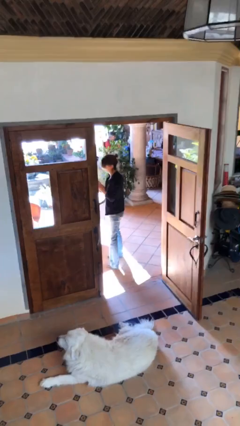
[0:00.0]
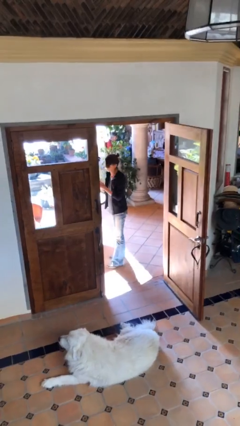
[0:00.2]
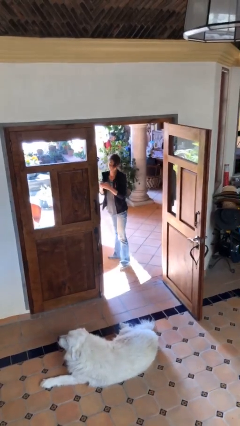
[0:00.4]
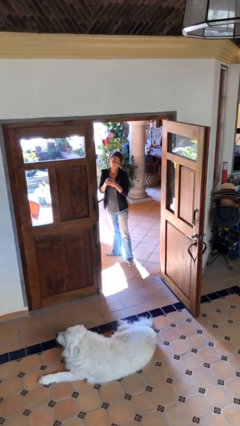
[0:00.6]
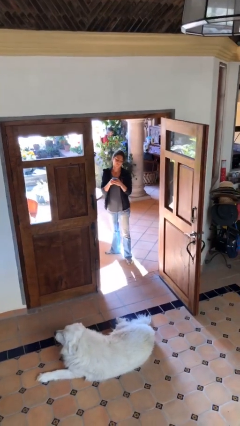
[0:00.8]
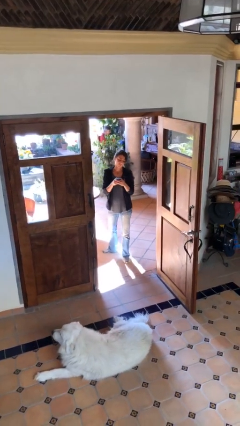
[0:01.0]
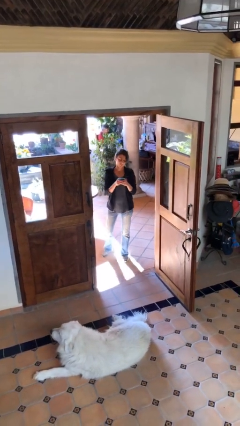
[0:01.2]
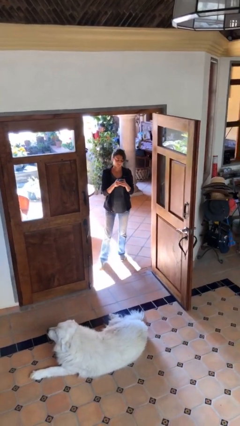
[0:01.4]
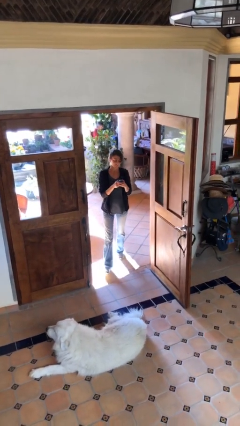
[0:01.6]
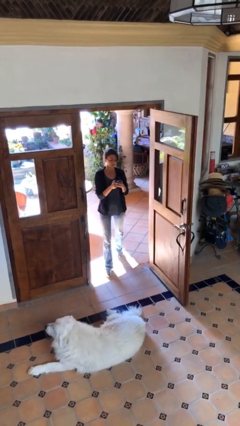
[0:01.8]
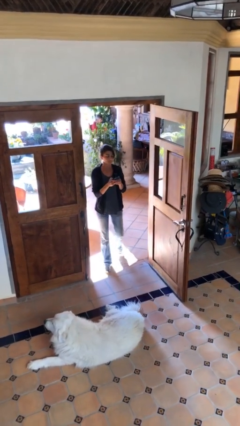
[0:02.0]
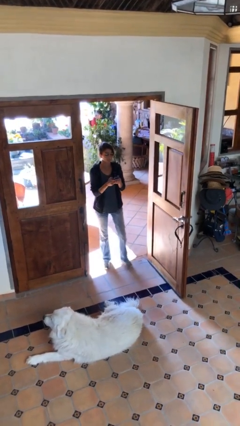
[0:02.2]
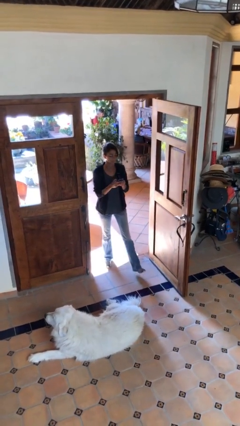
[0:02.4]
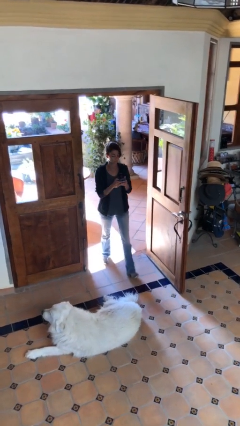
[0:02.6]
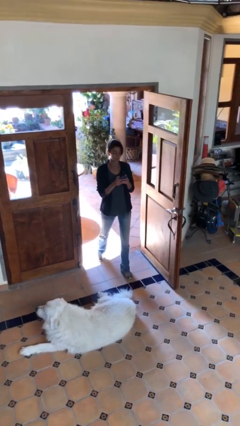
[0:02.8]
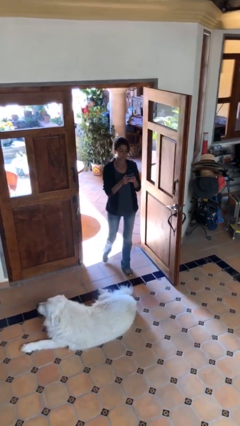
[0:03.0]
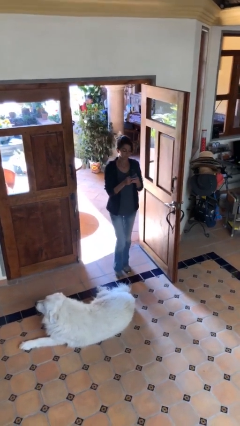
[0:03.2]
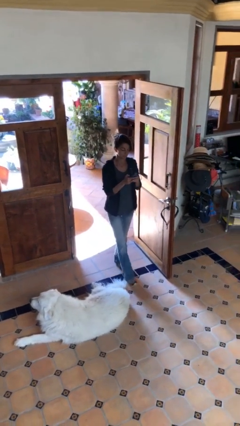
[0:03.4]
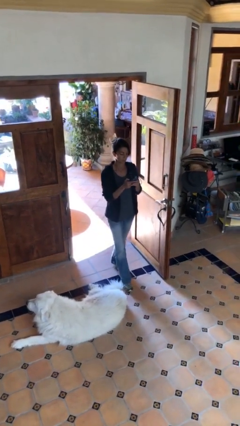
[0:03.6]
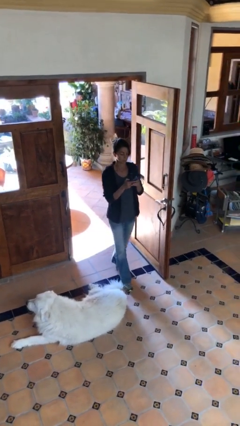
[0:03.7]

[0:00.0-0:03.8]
person enters scene through structure

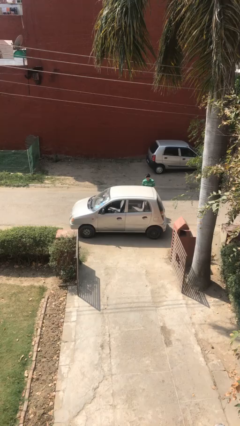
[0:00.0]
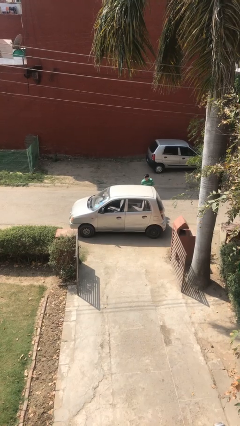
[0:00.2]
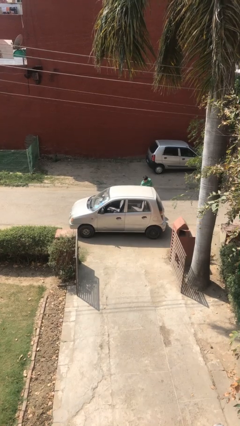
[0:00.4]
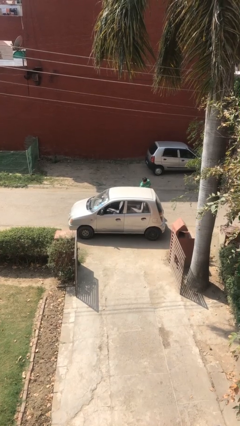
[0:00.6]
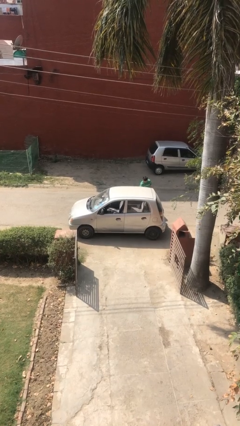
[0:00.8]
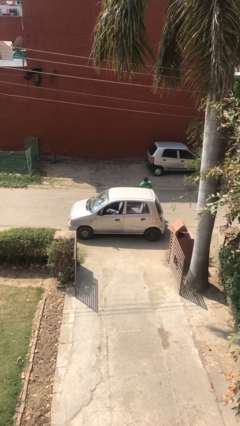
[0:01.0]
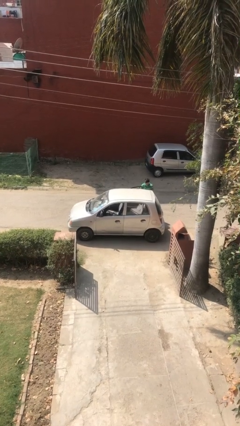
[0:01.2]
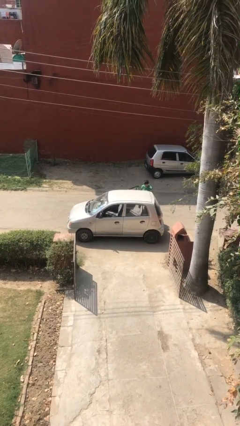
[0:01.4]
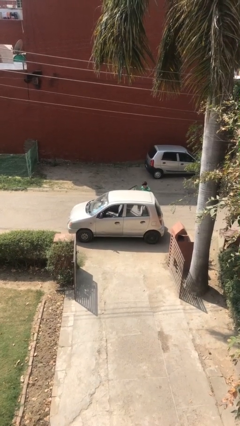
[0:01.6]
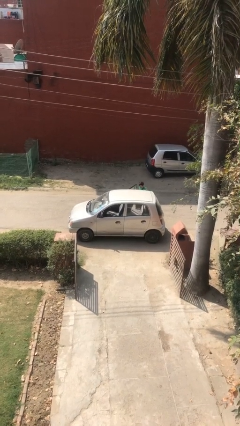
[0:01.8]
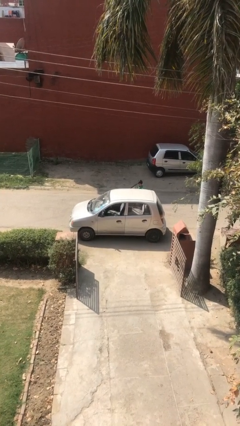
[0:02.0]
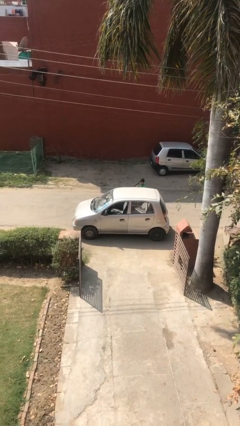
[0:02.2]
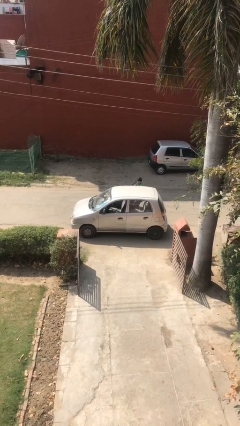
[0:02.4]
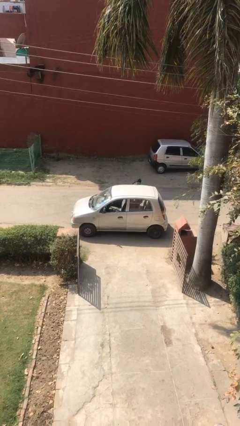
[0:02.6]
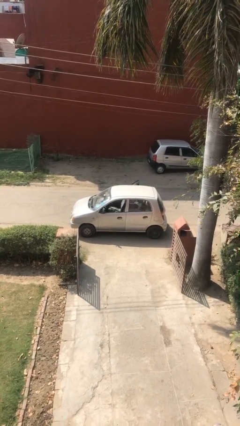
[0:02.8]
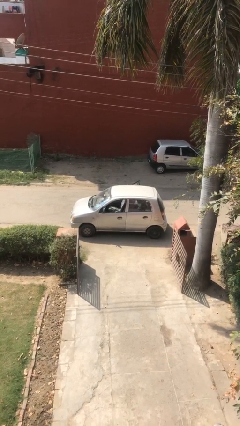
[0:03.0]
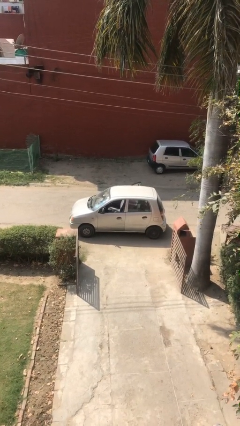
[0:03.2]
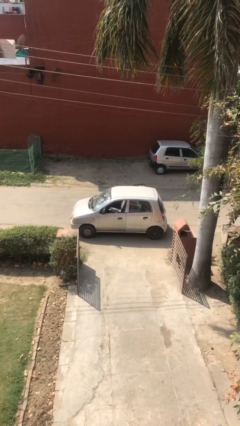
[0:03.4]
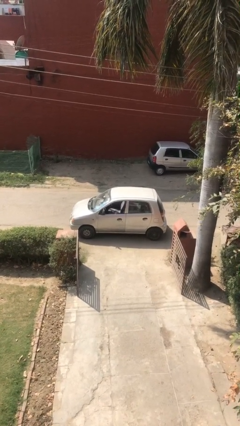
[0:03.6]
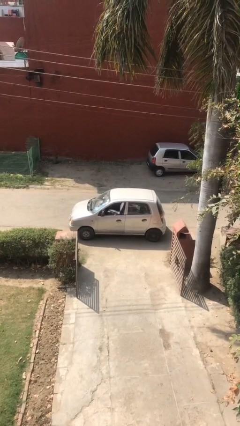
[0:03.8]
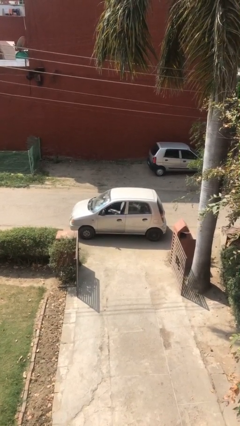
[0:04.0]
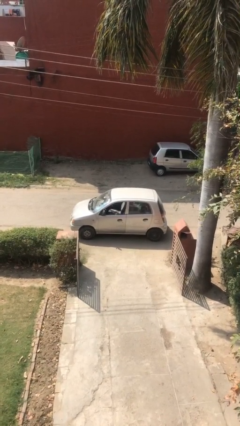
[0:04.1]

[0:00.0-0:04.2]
car picks up person

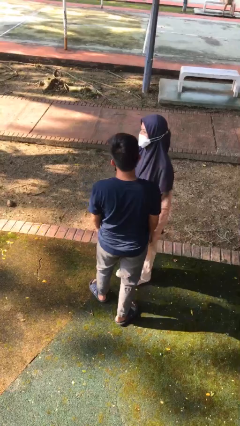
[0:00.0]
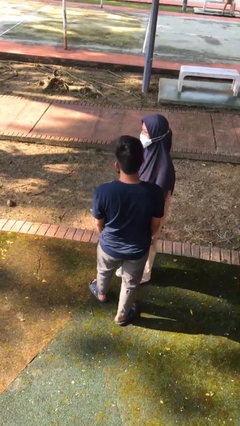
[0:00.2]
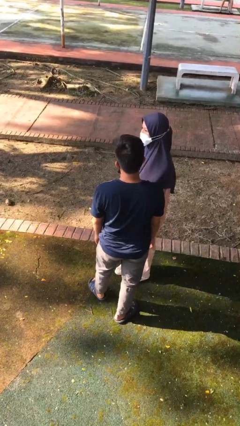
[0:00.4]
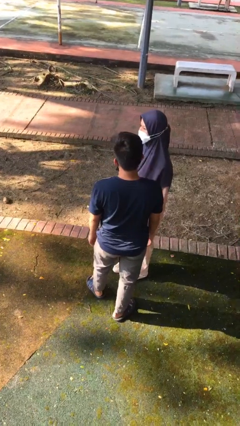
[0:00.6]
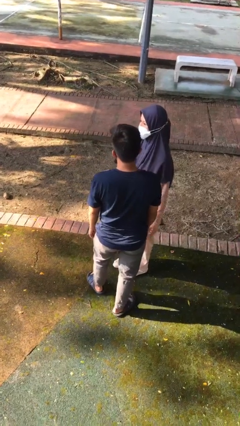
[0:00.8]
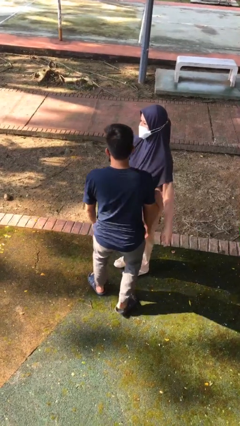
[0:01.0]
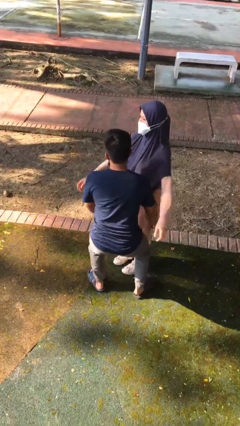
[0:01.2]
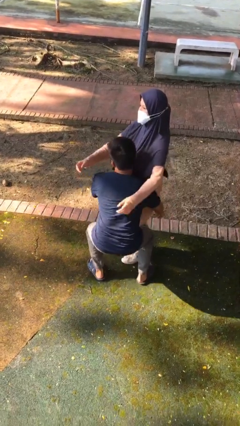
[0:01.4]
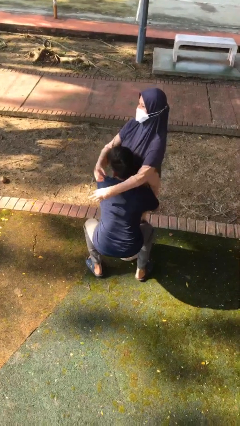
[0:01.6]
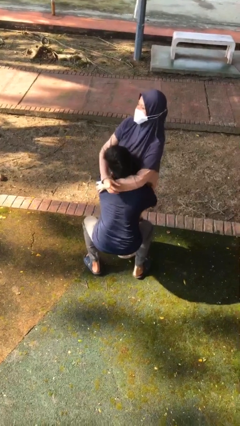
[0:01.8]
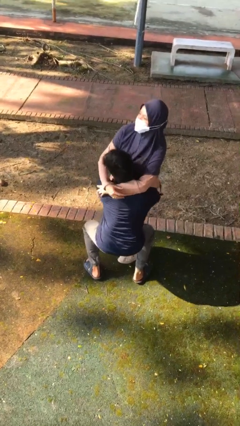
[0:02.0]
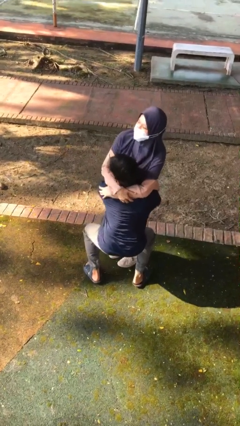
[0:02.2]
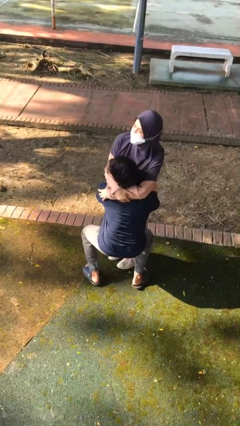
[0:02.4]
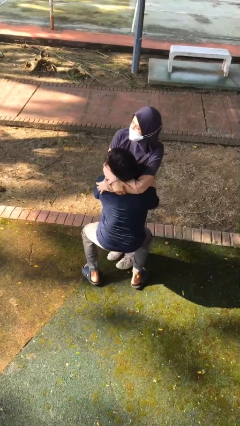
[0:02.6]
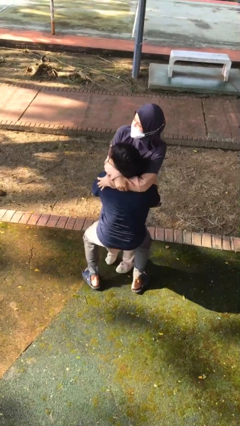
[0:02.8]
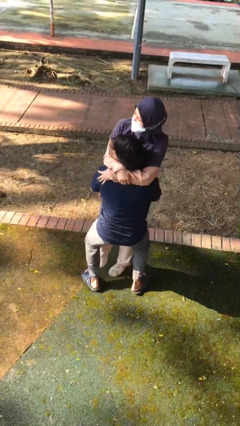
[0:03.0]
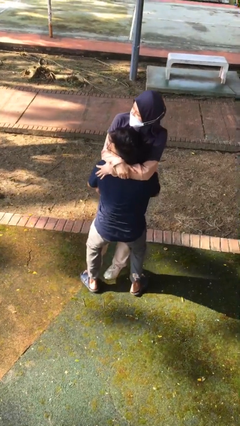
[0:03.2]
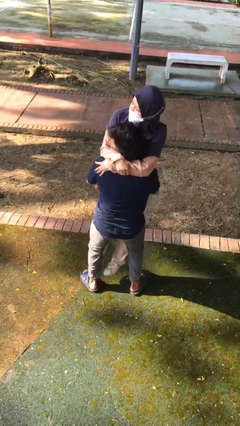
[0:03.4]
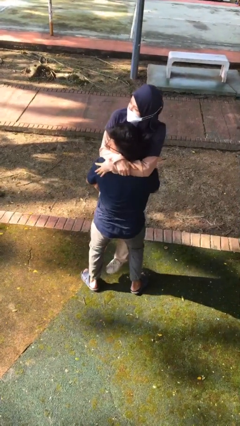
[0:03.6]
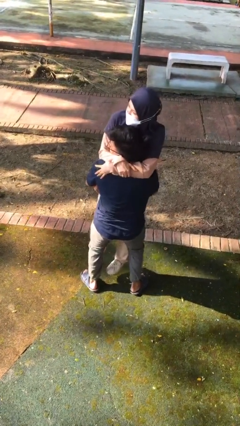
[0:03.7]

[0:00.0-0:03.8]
person picks up person

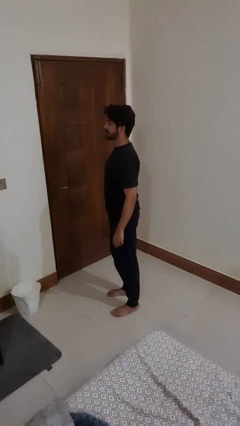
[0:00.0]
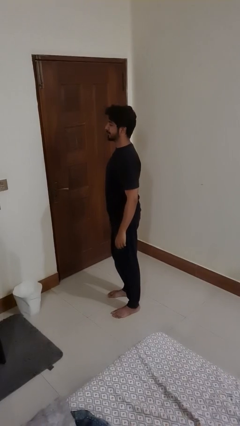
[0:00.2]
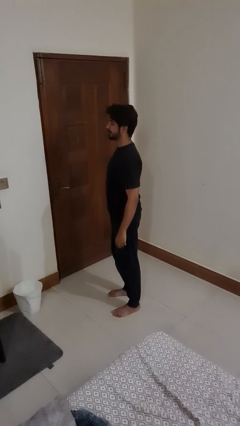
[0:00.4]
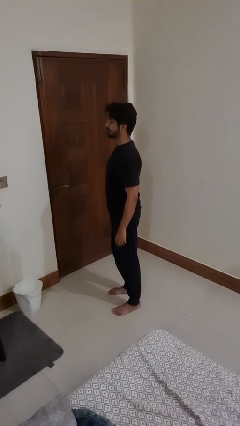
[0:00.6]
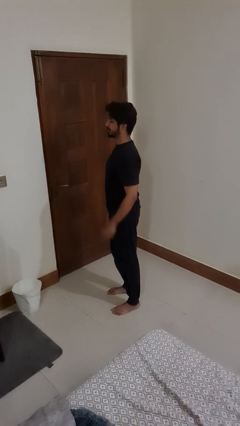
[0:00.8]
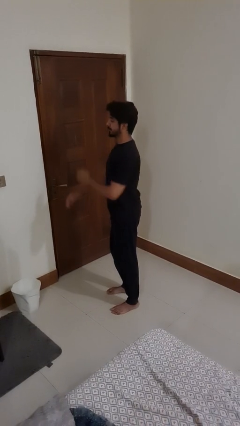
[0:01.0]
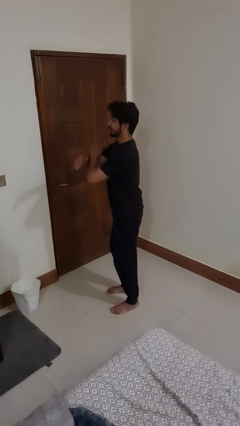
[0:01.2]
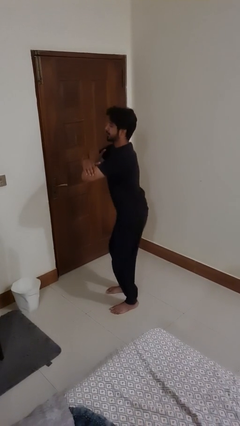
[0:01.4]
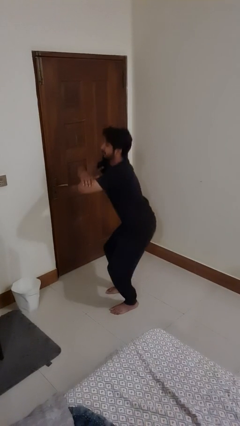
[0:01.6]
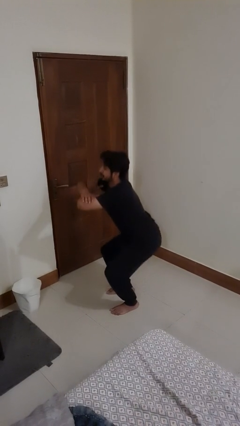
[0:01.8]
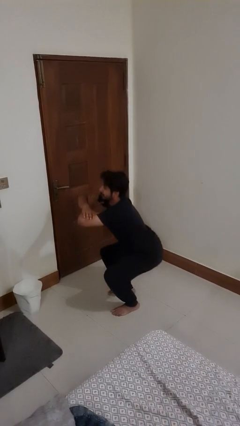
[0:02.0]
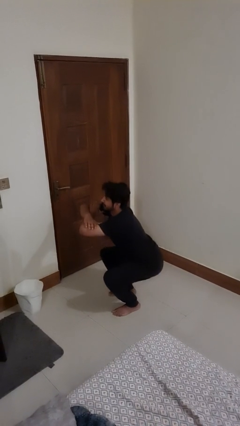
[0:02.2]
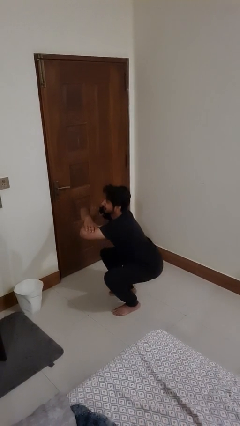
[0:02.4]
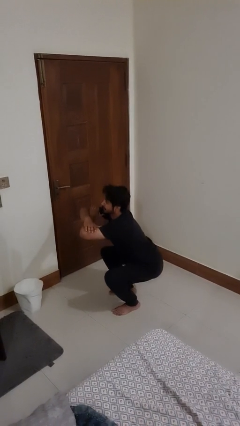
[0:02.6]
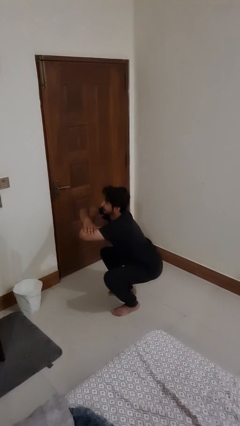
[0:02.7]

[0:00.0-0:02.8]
person squats

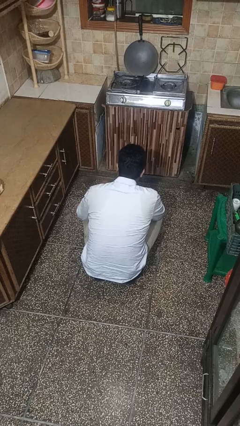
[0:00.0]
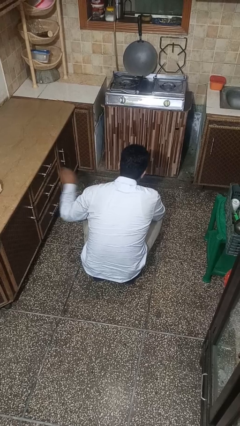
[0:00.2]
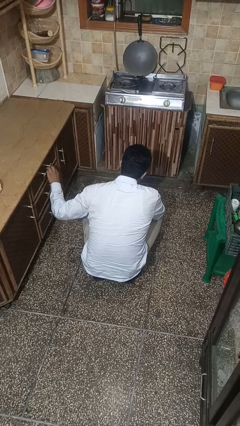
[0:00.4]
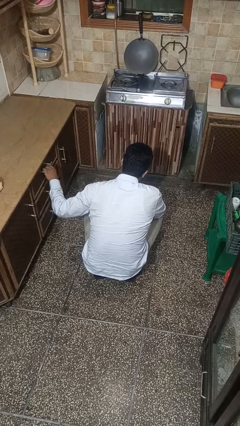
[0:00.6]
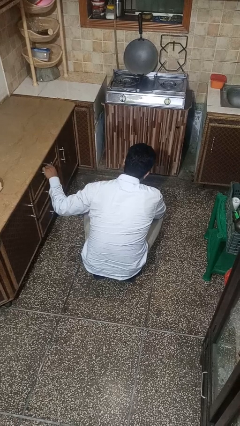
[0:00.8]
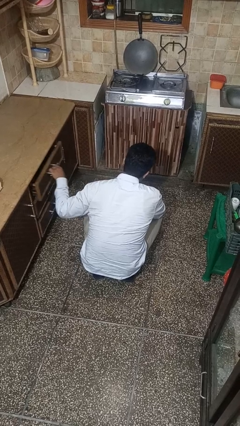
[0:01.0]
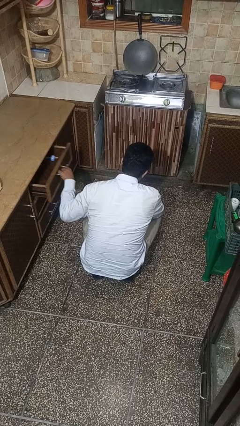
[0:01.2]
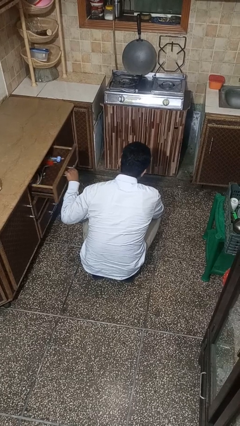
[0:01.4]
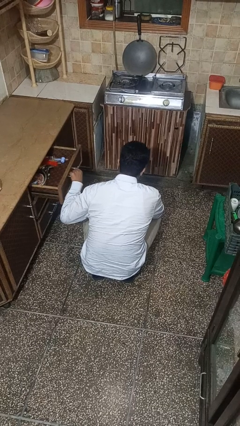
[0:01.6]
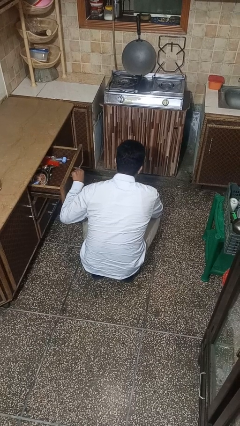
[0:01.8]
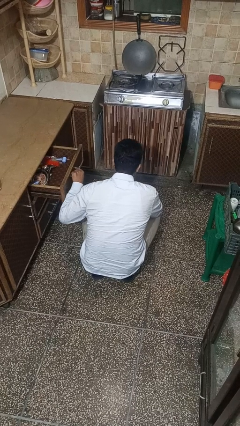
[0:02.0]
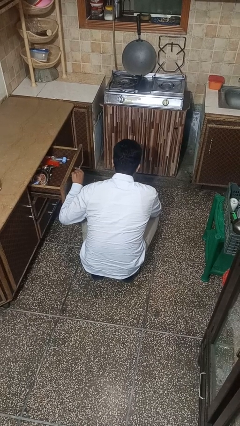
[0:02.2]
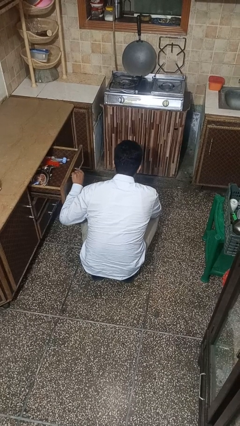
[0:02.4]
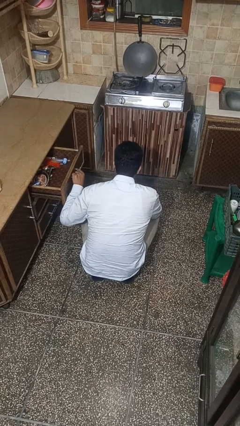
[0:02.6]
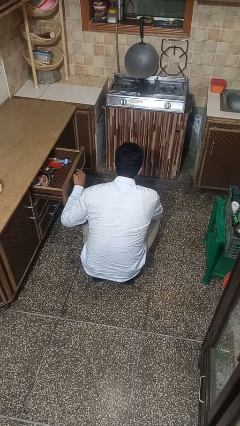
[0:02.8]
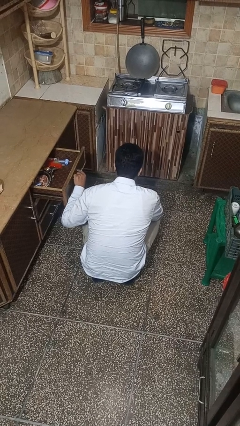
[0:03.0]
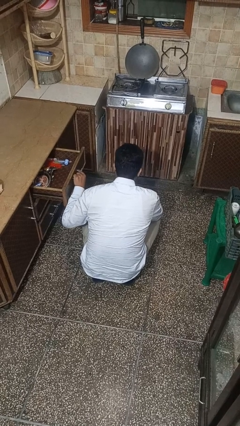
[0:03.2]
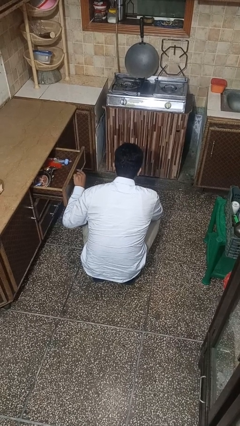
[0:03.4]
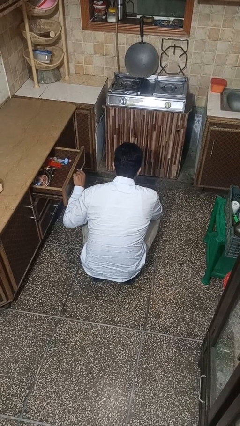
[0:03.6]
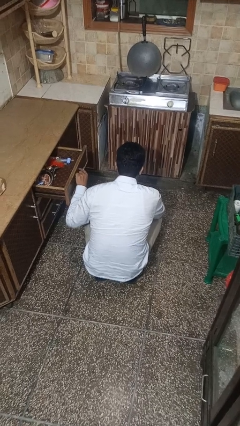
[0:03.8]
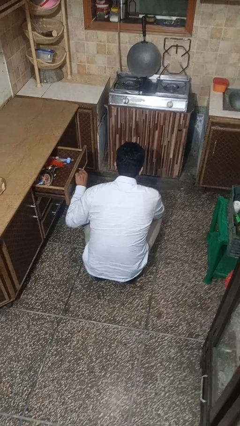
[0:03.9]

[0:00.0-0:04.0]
person opens kitchen drawer
